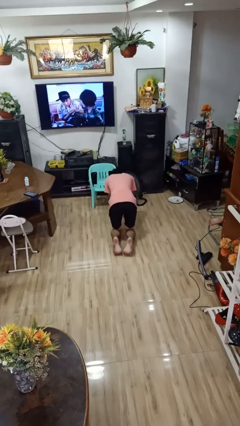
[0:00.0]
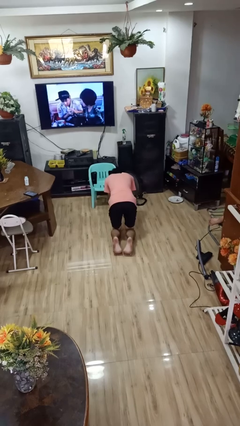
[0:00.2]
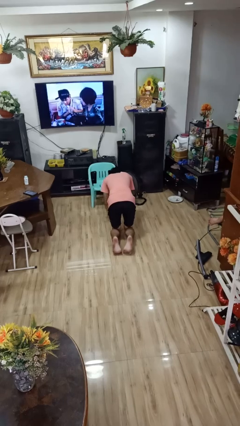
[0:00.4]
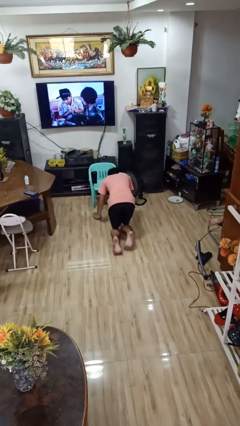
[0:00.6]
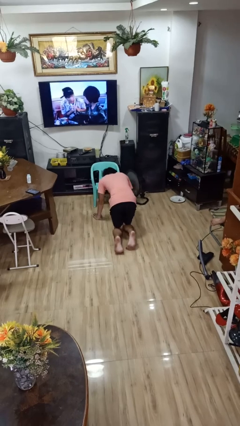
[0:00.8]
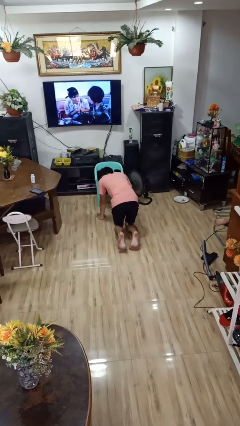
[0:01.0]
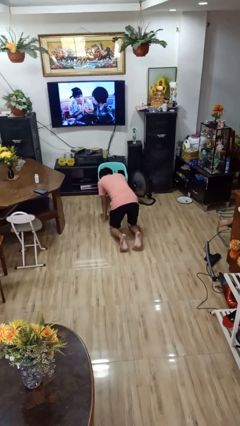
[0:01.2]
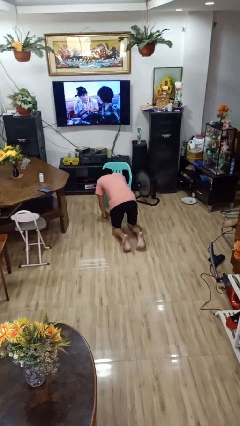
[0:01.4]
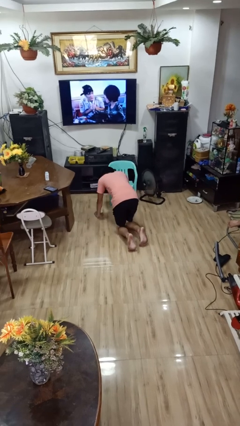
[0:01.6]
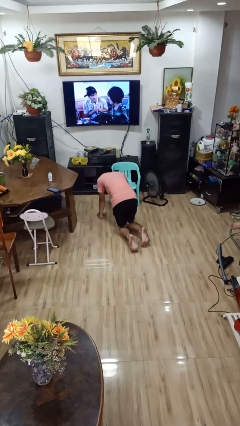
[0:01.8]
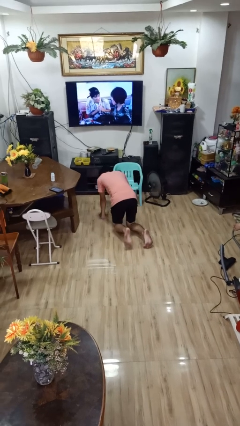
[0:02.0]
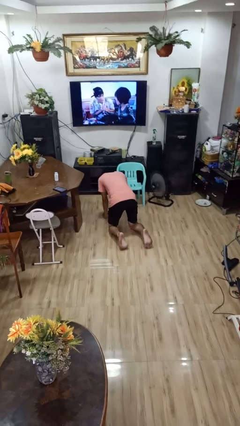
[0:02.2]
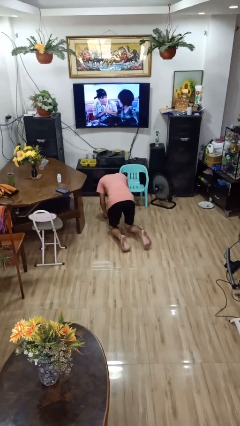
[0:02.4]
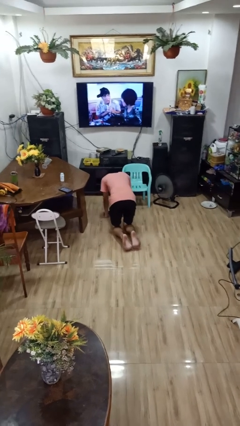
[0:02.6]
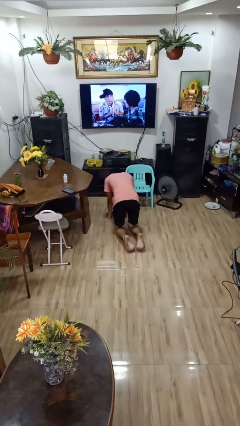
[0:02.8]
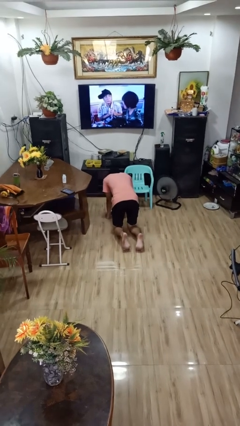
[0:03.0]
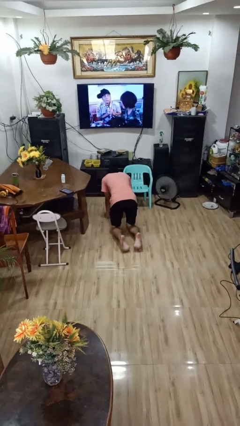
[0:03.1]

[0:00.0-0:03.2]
person crawls

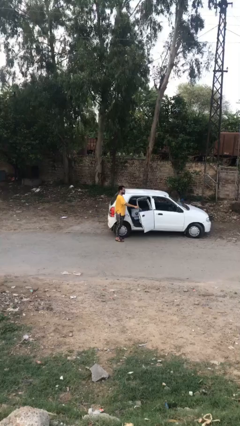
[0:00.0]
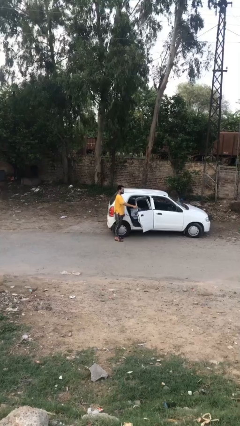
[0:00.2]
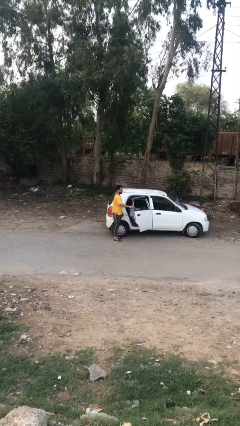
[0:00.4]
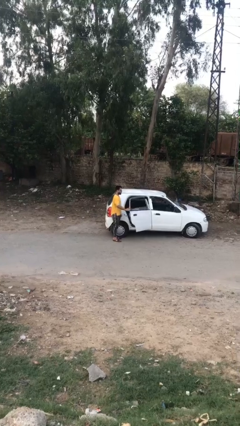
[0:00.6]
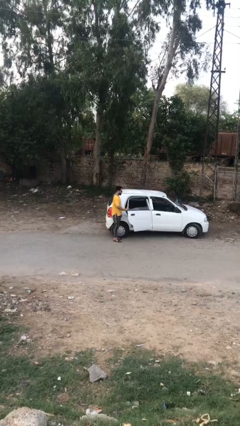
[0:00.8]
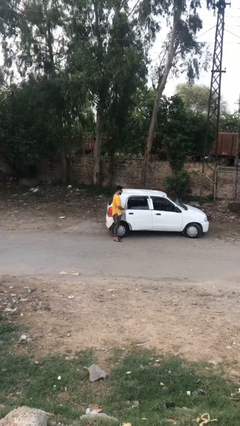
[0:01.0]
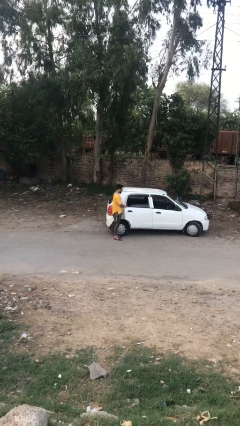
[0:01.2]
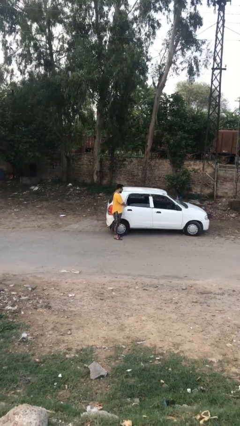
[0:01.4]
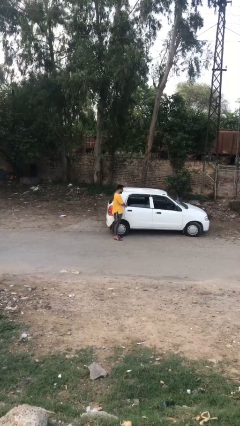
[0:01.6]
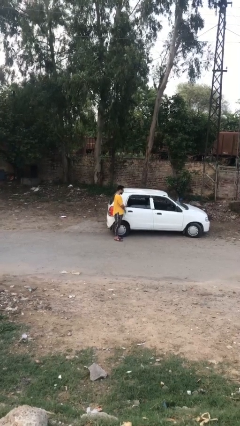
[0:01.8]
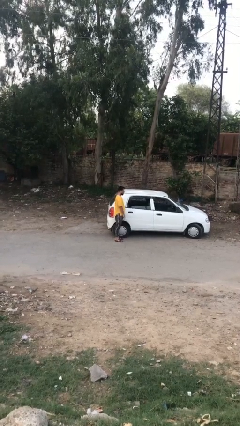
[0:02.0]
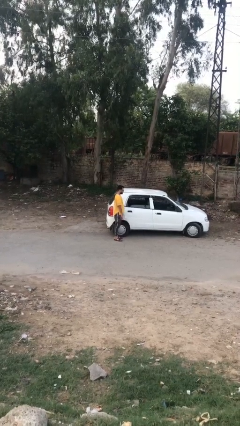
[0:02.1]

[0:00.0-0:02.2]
person closes car door

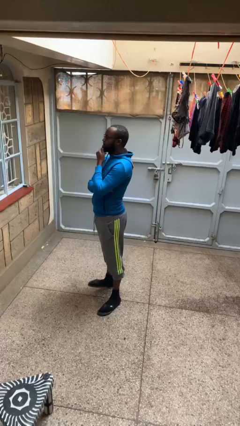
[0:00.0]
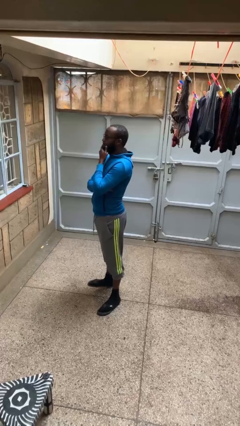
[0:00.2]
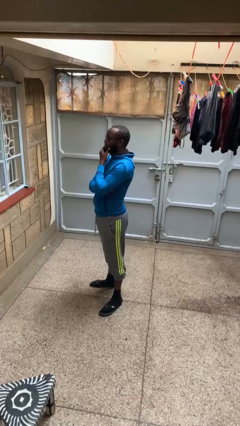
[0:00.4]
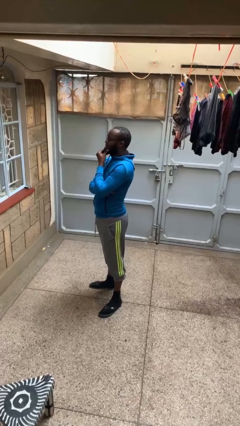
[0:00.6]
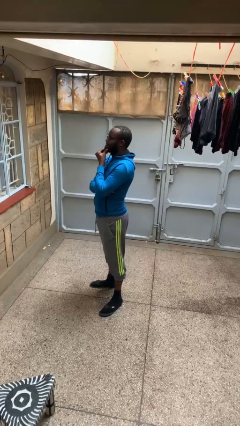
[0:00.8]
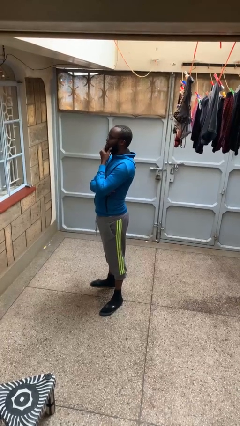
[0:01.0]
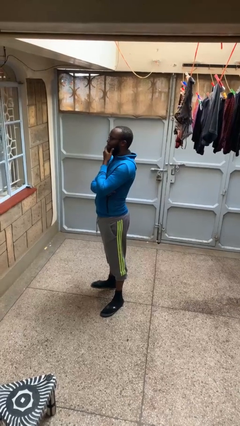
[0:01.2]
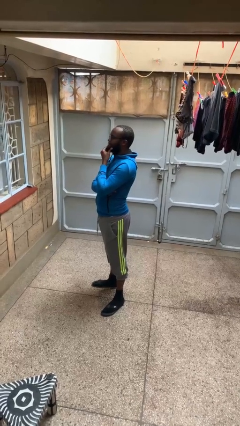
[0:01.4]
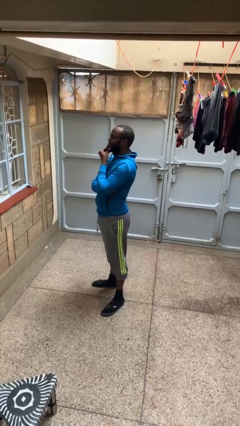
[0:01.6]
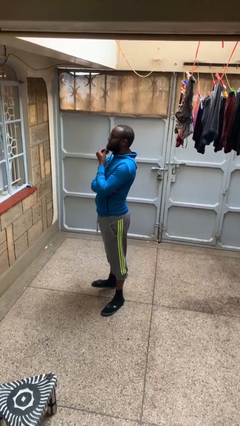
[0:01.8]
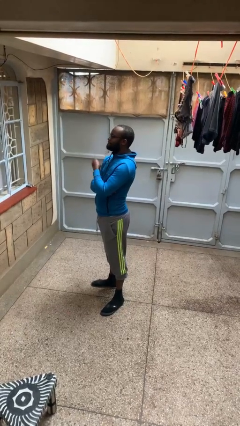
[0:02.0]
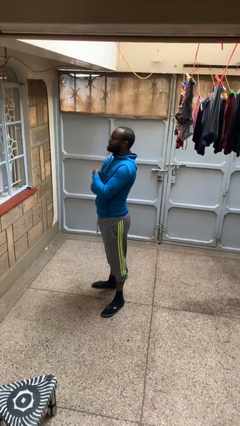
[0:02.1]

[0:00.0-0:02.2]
person strokes chin

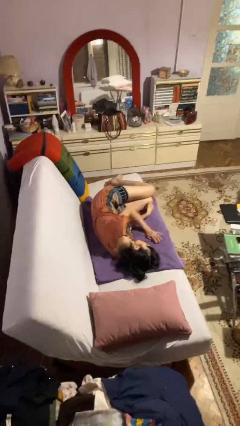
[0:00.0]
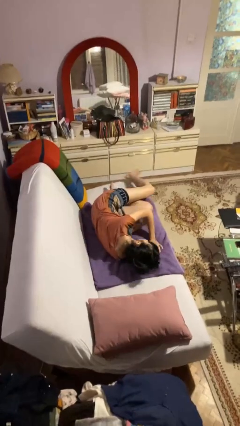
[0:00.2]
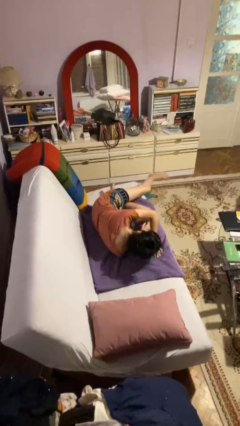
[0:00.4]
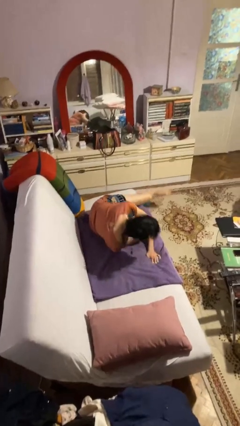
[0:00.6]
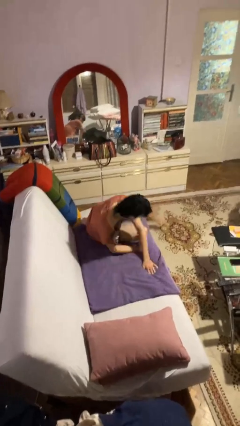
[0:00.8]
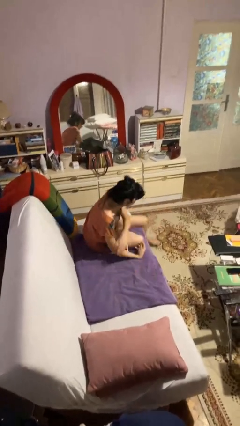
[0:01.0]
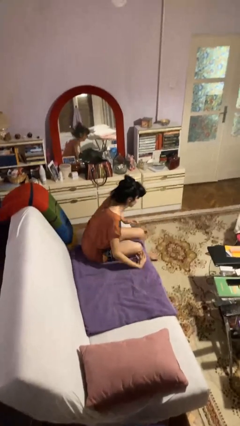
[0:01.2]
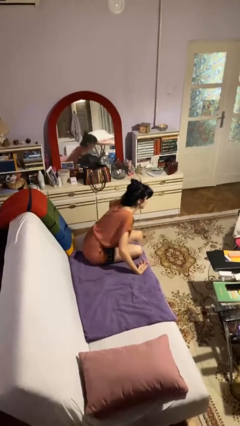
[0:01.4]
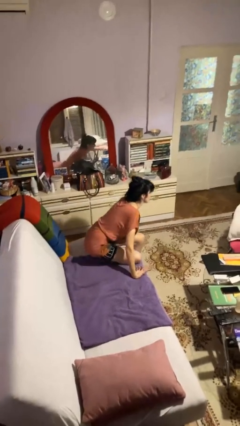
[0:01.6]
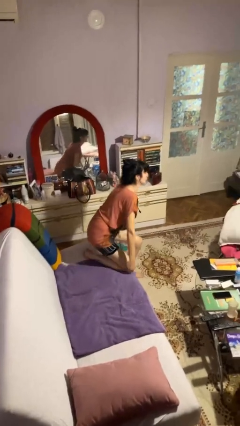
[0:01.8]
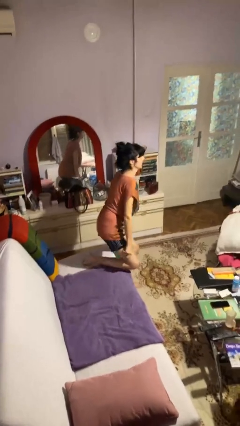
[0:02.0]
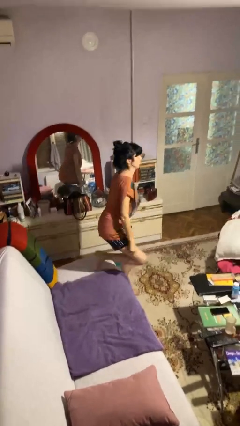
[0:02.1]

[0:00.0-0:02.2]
person stands up

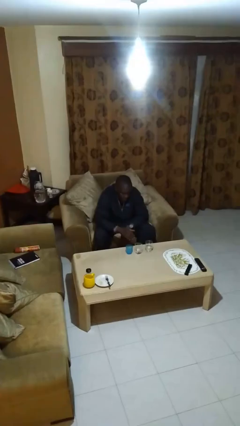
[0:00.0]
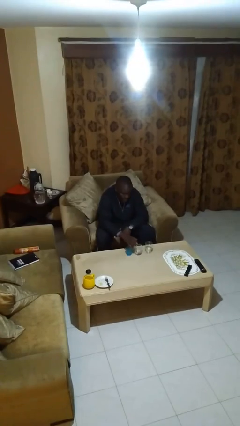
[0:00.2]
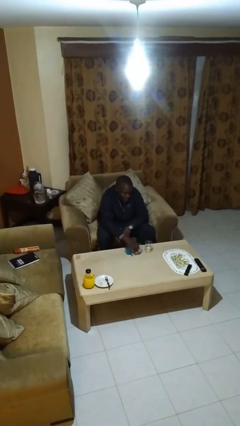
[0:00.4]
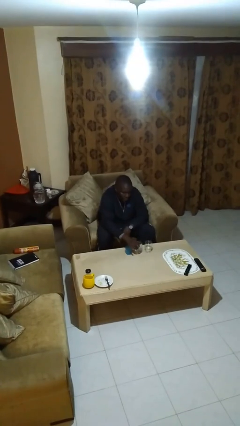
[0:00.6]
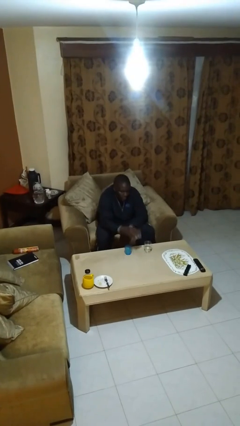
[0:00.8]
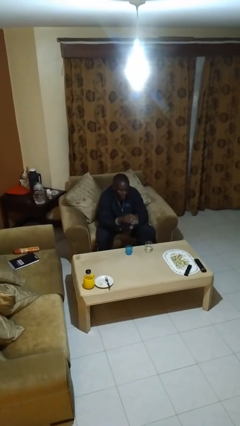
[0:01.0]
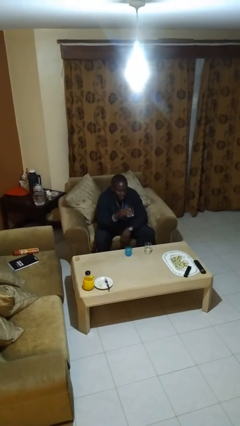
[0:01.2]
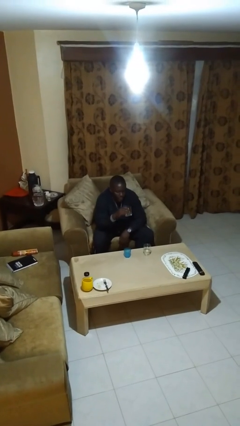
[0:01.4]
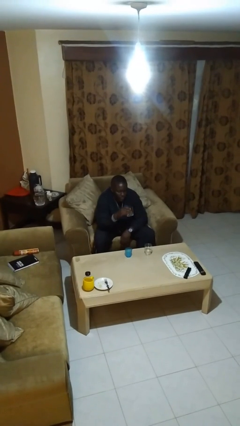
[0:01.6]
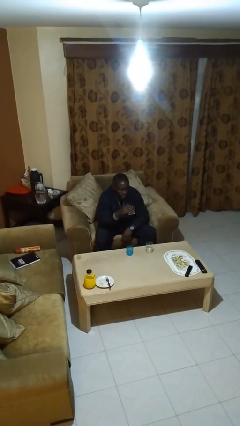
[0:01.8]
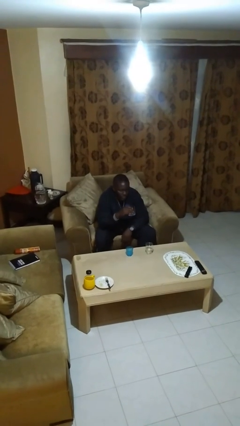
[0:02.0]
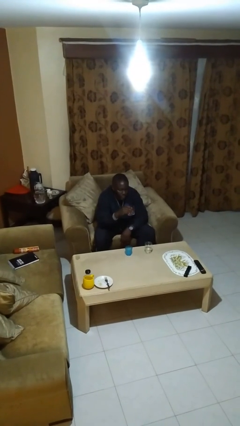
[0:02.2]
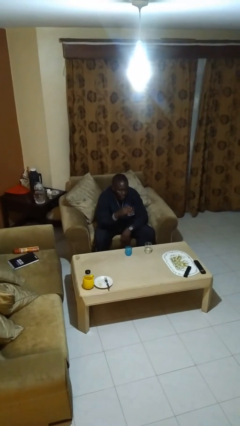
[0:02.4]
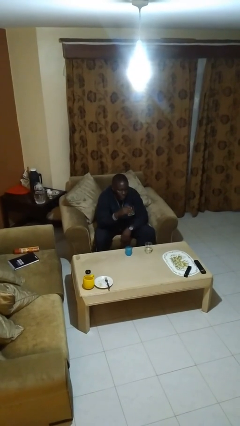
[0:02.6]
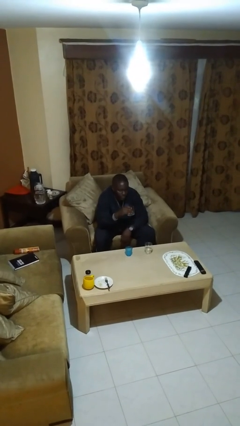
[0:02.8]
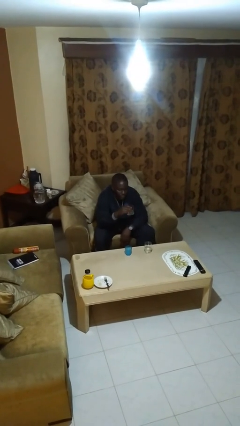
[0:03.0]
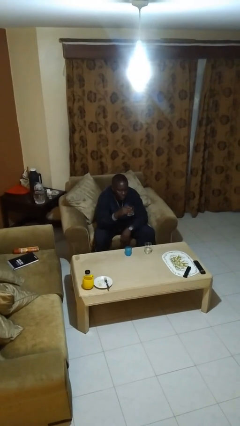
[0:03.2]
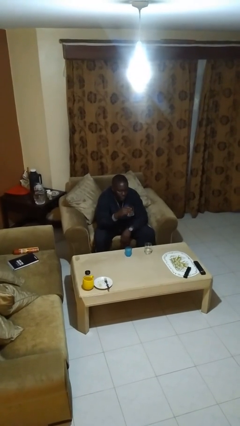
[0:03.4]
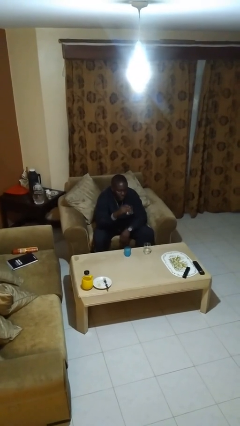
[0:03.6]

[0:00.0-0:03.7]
person picks up object from table

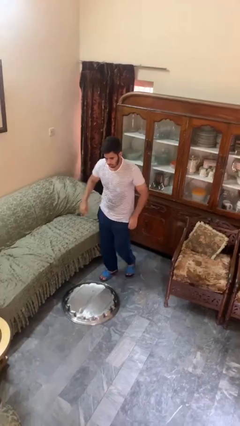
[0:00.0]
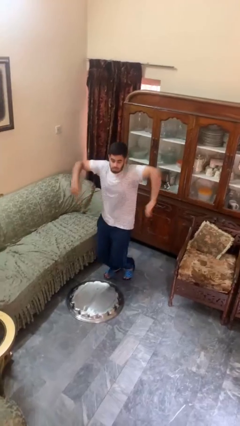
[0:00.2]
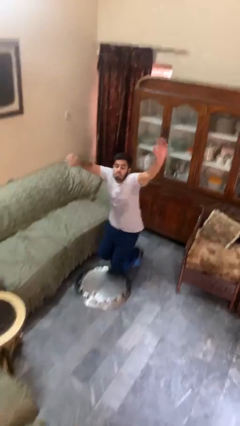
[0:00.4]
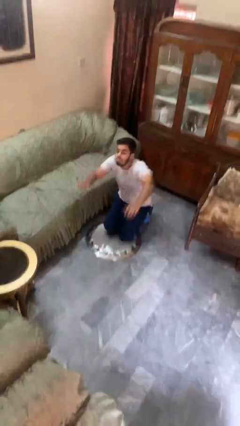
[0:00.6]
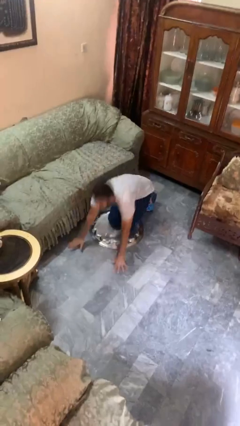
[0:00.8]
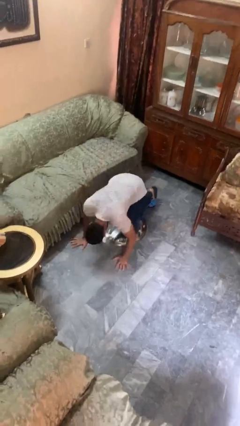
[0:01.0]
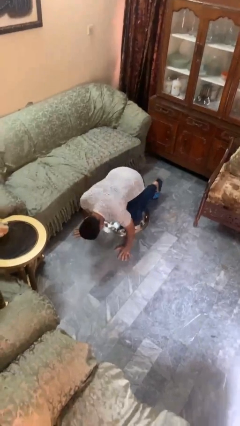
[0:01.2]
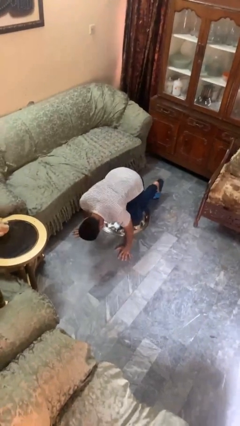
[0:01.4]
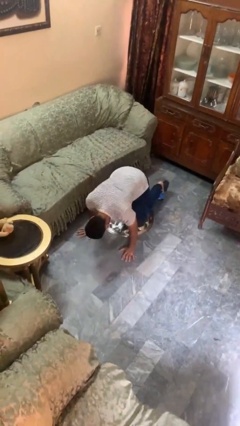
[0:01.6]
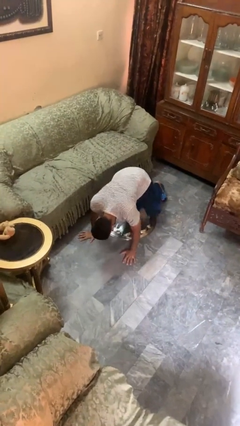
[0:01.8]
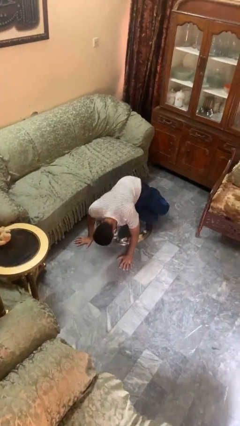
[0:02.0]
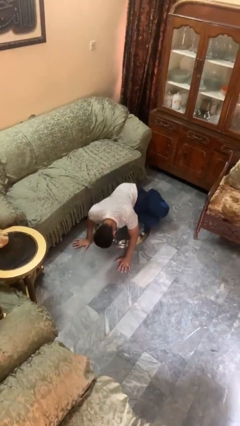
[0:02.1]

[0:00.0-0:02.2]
person trips on object on floor

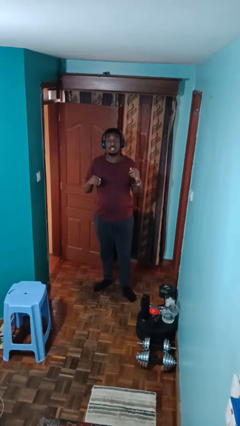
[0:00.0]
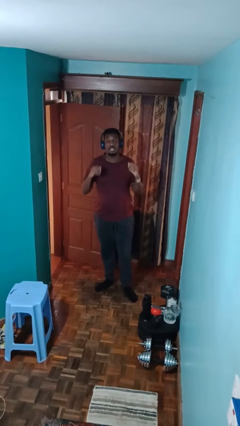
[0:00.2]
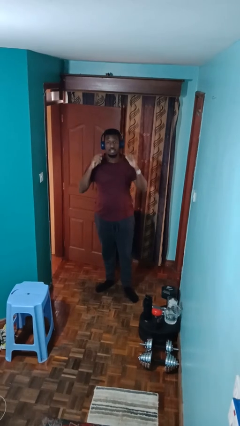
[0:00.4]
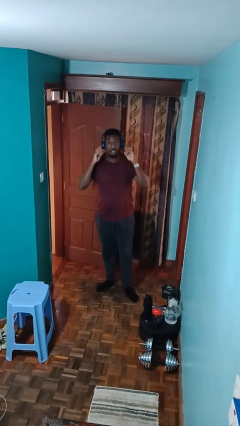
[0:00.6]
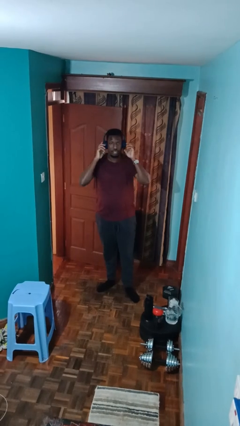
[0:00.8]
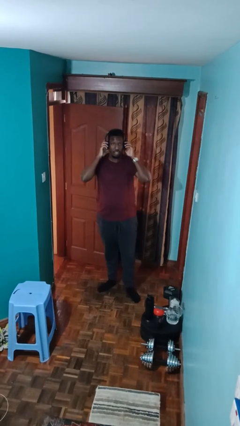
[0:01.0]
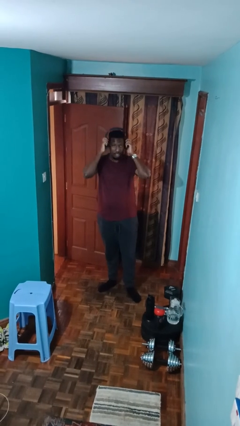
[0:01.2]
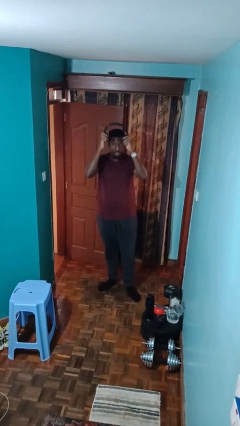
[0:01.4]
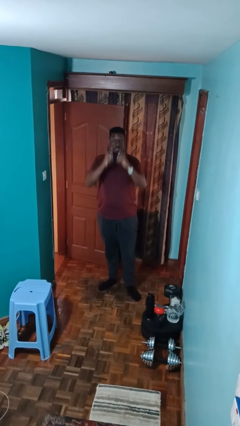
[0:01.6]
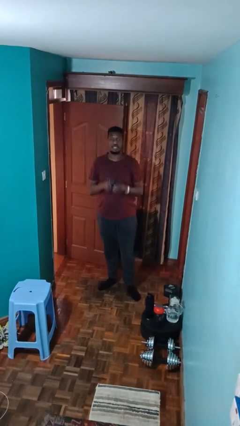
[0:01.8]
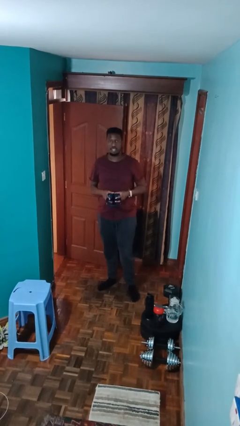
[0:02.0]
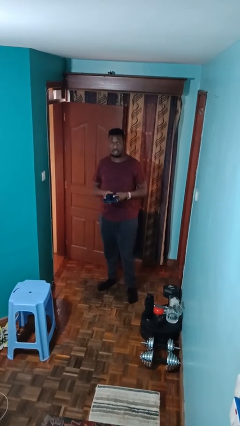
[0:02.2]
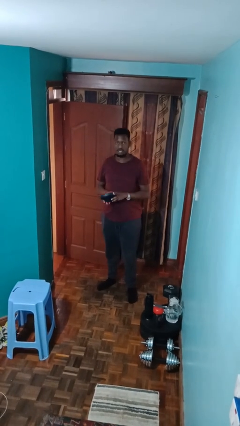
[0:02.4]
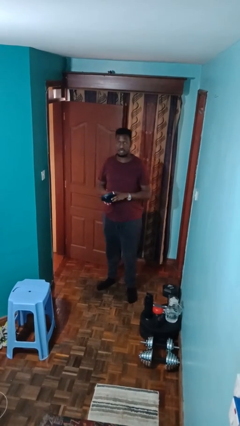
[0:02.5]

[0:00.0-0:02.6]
person takes off headphones
